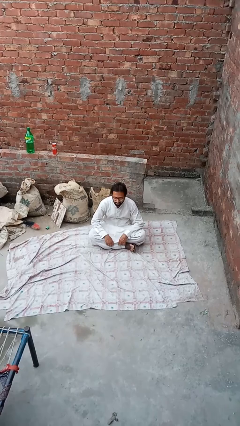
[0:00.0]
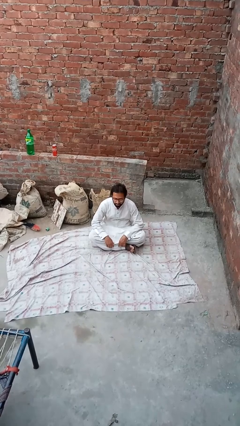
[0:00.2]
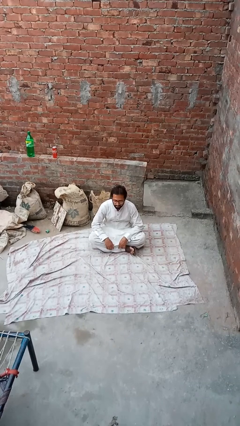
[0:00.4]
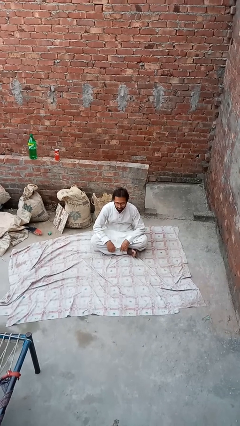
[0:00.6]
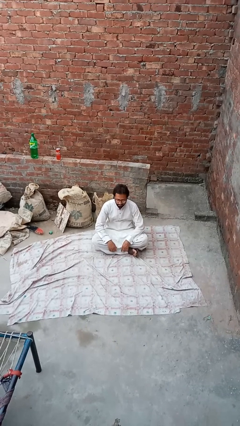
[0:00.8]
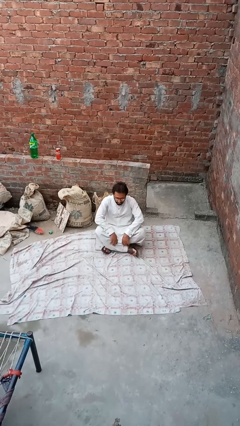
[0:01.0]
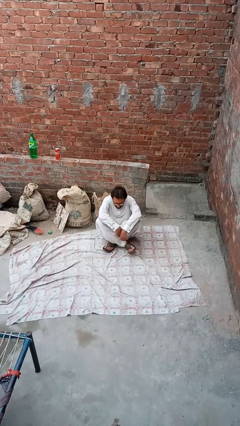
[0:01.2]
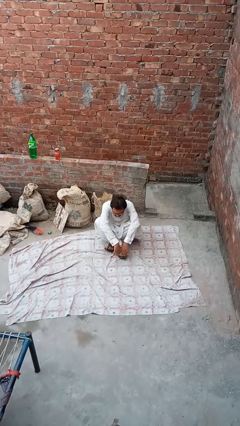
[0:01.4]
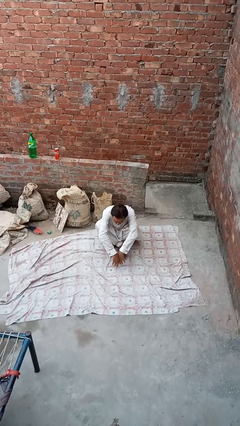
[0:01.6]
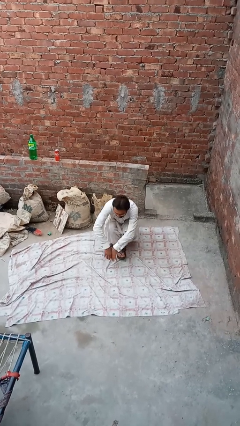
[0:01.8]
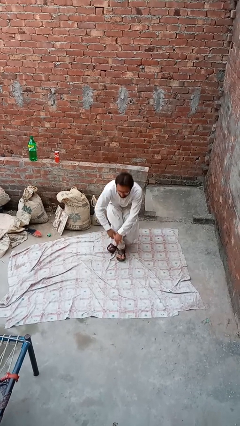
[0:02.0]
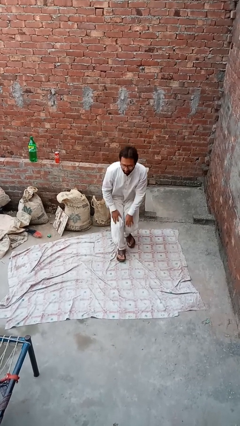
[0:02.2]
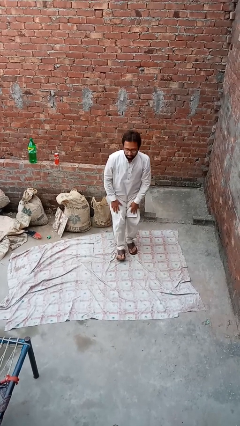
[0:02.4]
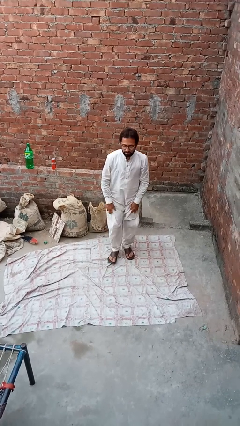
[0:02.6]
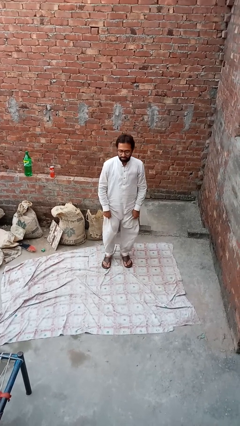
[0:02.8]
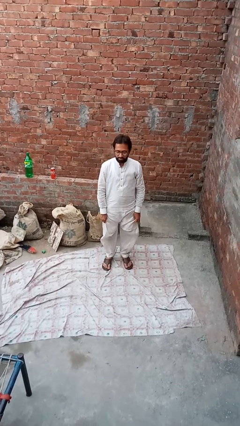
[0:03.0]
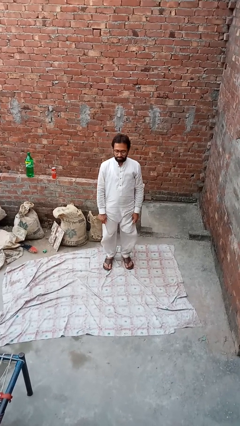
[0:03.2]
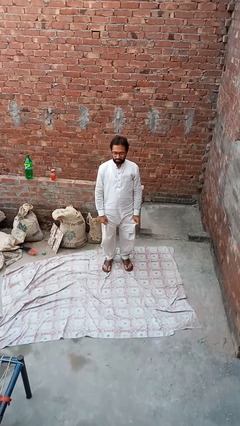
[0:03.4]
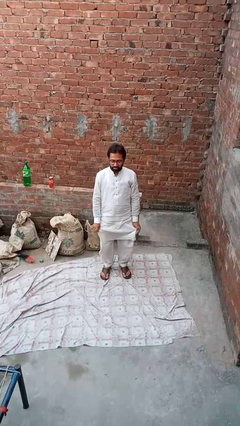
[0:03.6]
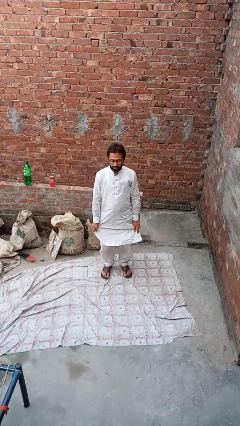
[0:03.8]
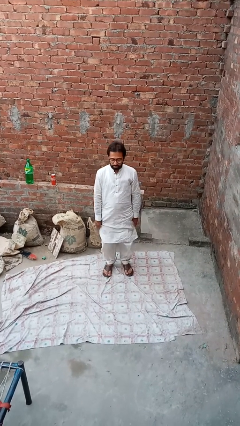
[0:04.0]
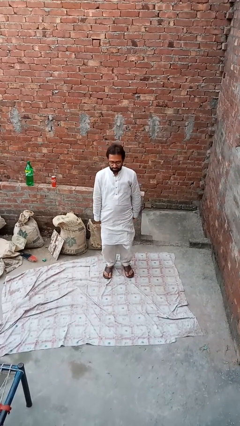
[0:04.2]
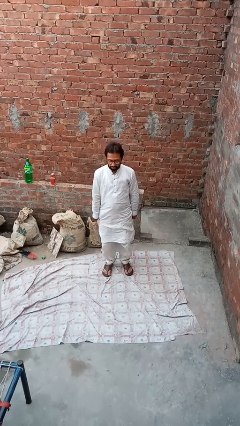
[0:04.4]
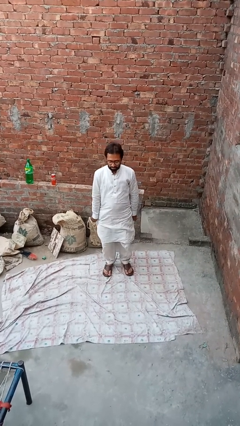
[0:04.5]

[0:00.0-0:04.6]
person stands up from floor

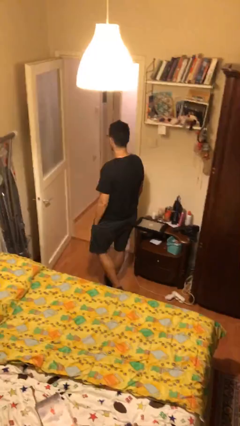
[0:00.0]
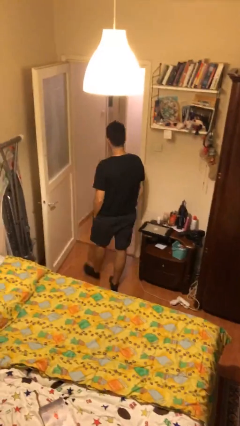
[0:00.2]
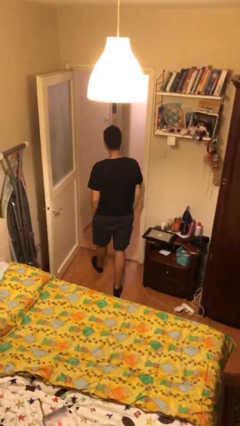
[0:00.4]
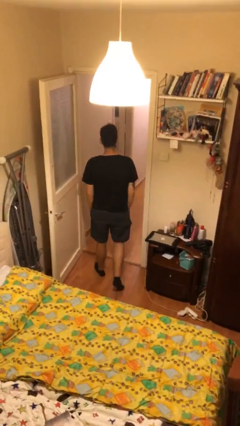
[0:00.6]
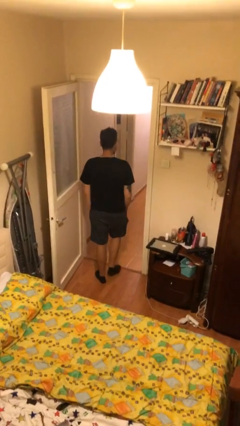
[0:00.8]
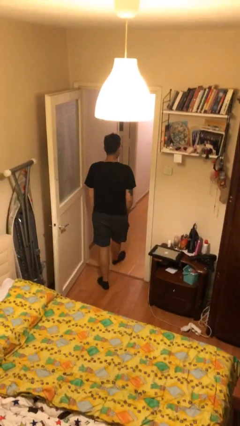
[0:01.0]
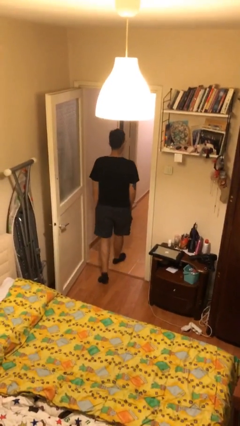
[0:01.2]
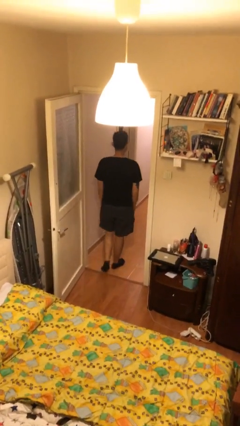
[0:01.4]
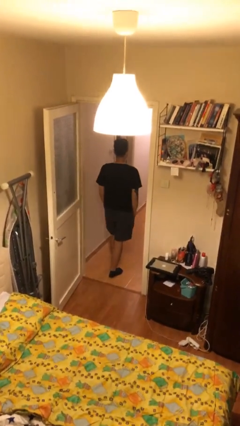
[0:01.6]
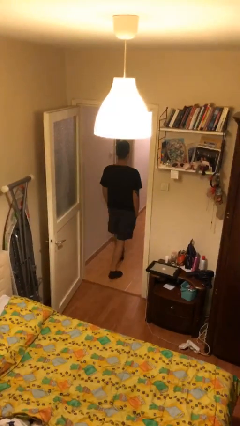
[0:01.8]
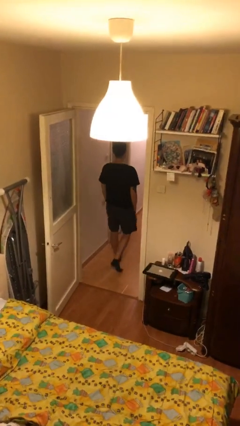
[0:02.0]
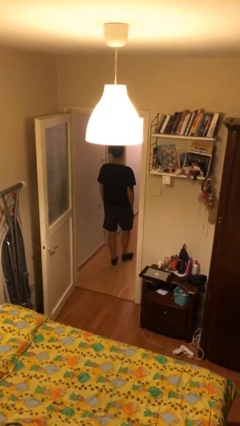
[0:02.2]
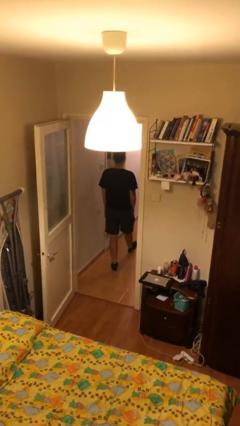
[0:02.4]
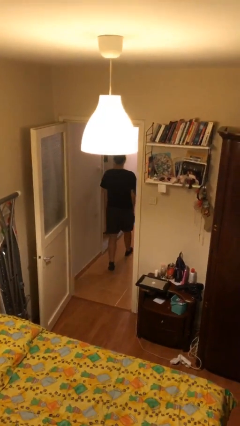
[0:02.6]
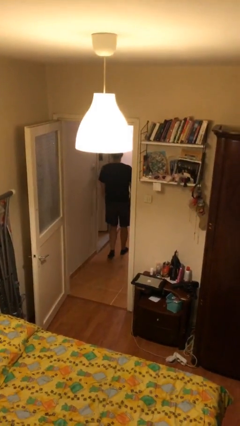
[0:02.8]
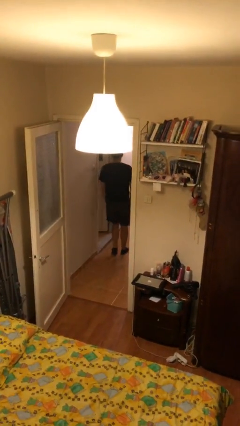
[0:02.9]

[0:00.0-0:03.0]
person exits scene through structure

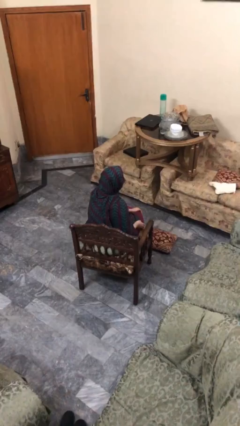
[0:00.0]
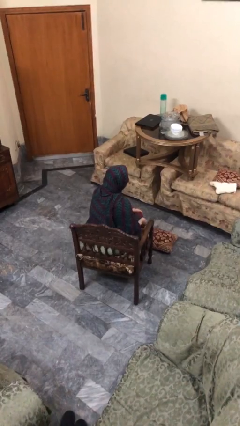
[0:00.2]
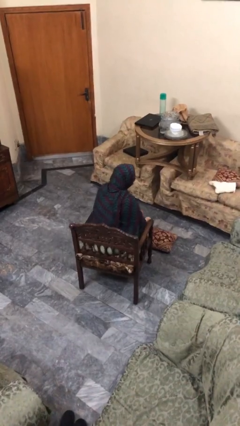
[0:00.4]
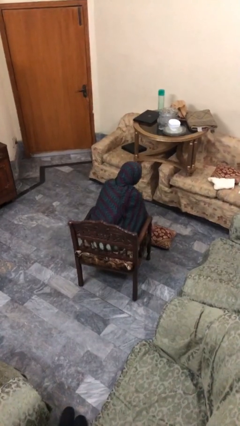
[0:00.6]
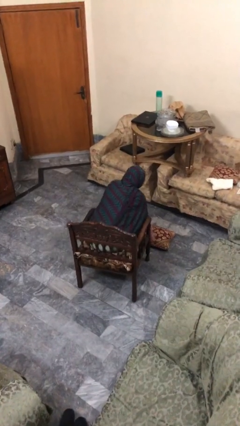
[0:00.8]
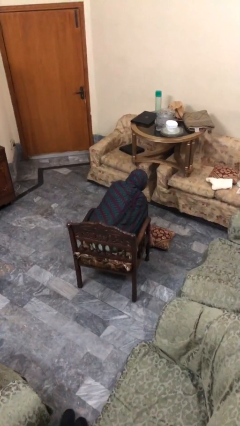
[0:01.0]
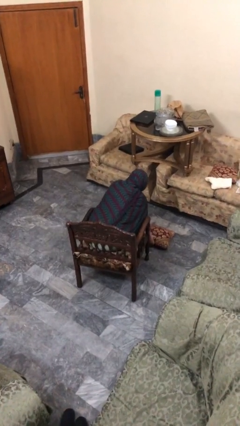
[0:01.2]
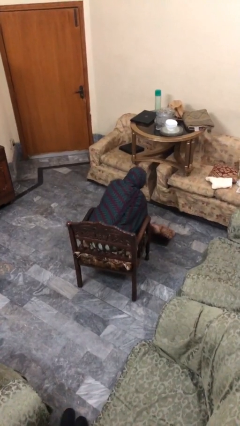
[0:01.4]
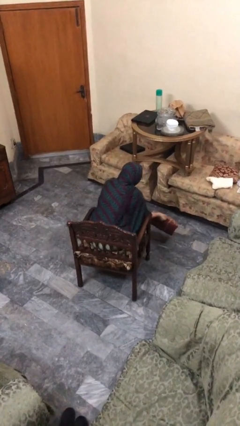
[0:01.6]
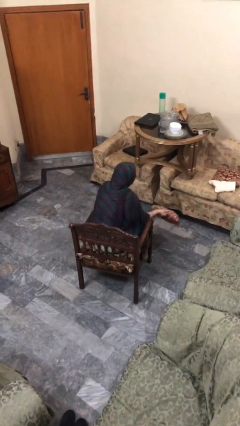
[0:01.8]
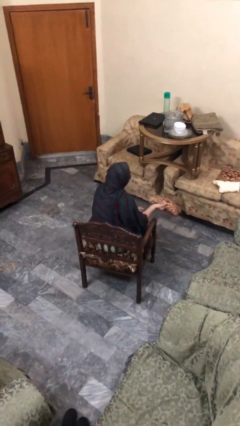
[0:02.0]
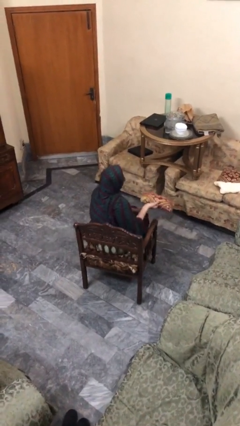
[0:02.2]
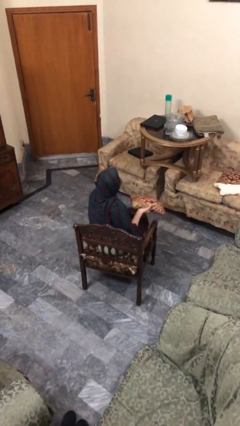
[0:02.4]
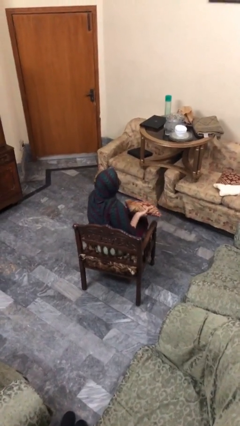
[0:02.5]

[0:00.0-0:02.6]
person picks up object from floor

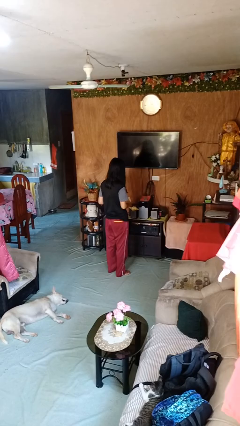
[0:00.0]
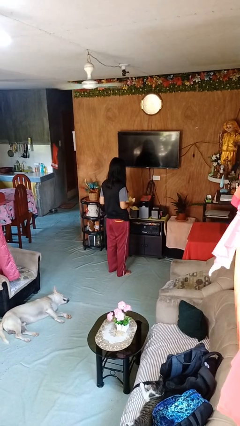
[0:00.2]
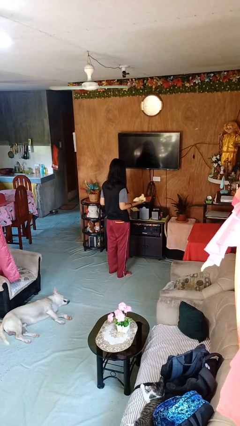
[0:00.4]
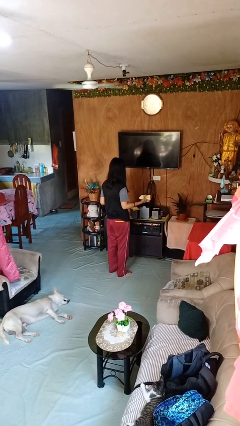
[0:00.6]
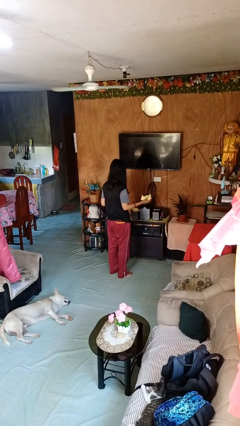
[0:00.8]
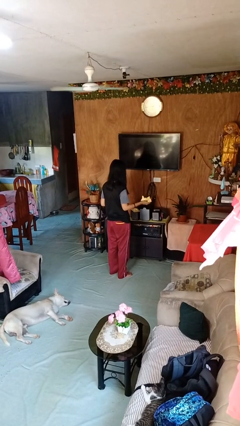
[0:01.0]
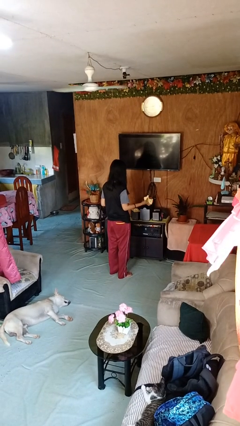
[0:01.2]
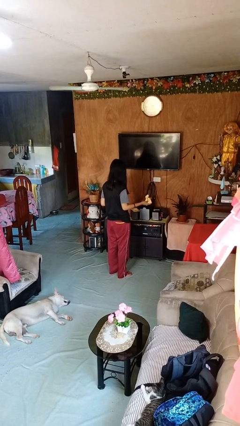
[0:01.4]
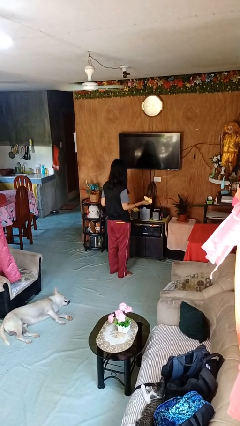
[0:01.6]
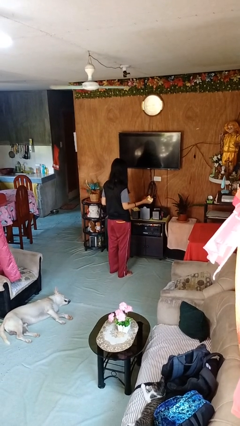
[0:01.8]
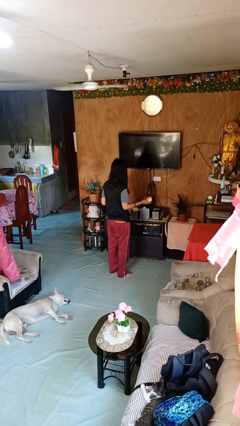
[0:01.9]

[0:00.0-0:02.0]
person crumples paper

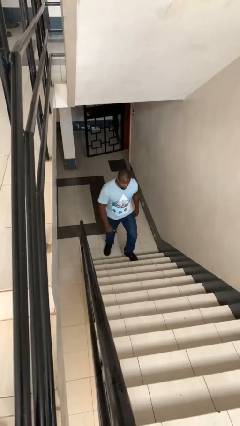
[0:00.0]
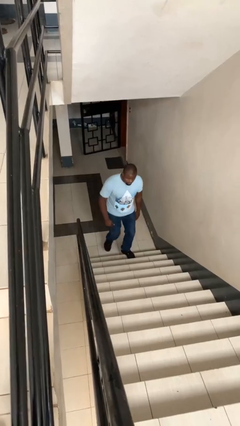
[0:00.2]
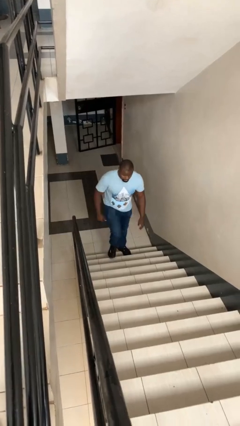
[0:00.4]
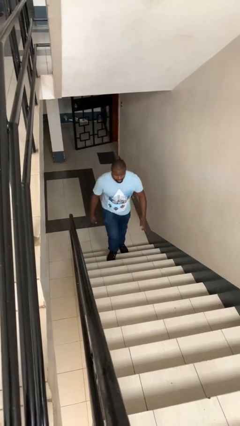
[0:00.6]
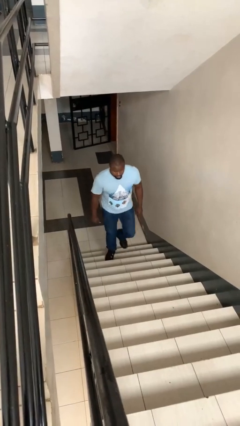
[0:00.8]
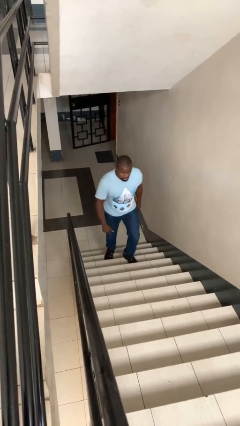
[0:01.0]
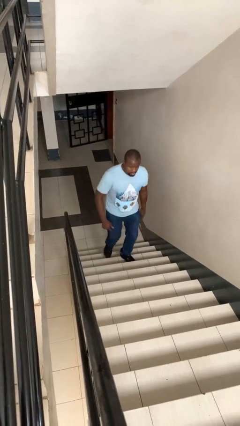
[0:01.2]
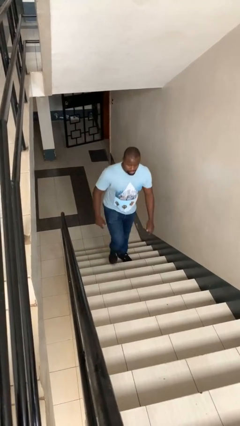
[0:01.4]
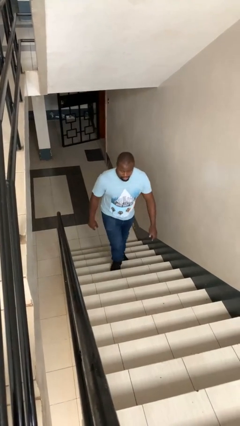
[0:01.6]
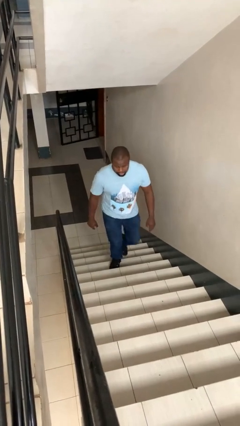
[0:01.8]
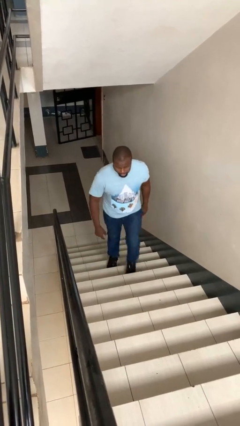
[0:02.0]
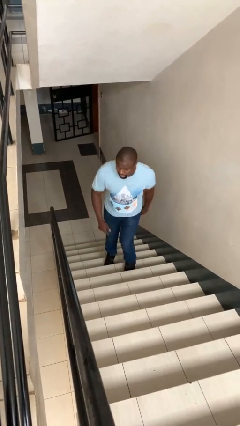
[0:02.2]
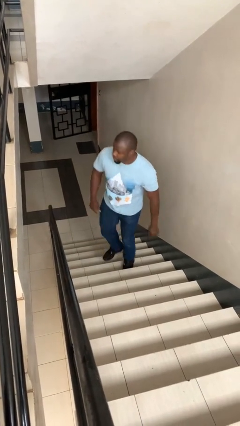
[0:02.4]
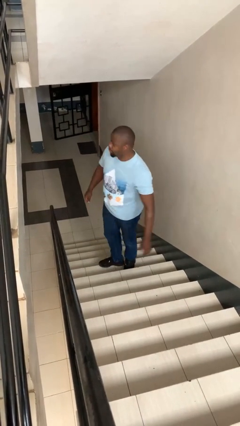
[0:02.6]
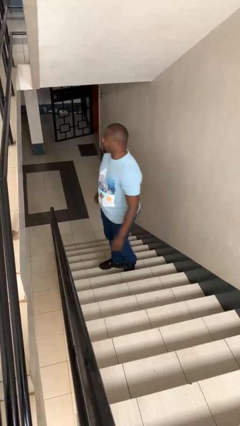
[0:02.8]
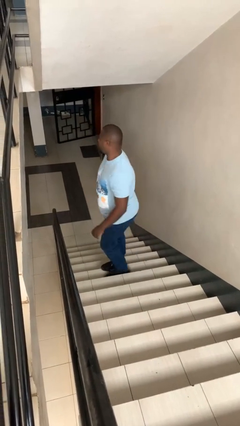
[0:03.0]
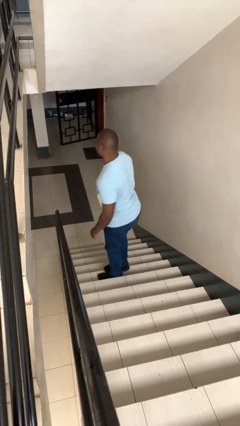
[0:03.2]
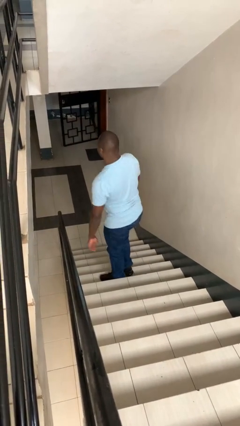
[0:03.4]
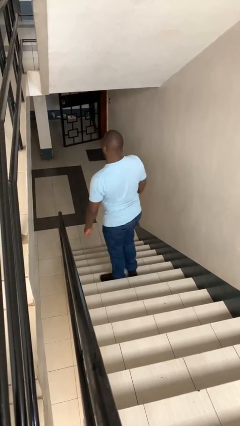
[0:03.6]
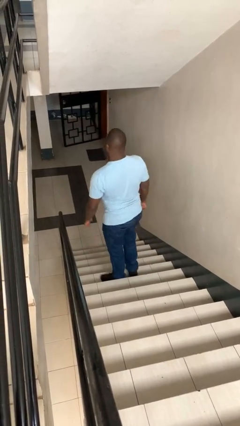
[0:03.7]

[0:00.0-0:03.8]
person climbs up stairs

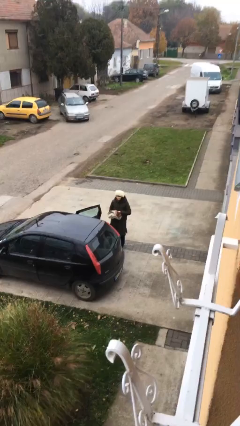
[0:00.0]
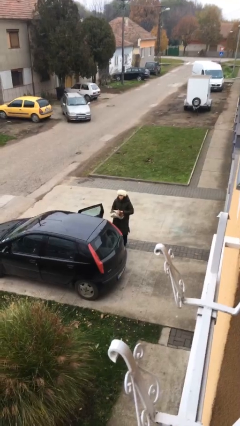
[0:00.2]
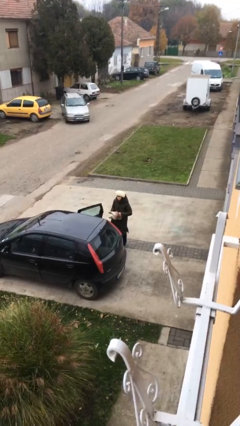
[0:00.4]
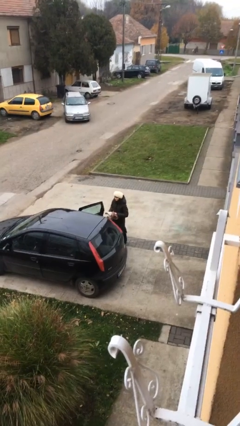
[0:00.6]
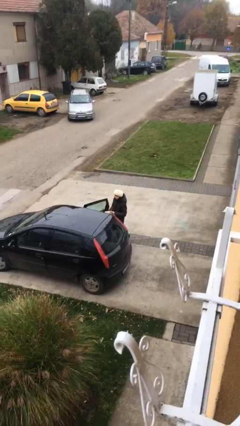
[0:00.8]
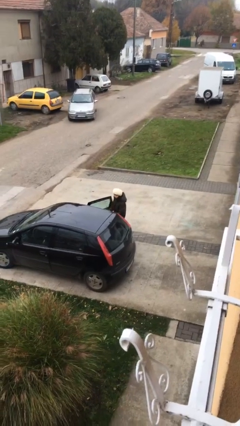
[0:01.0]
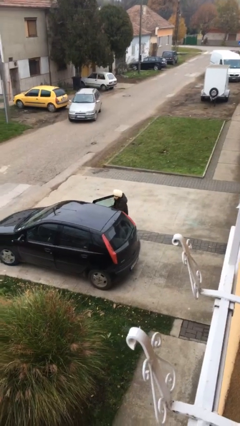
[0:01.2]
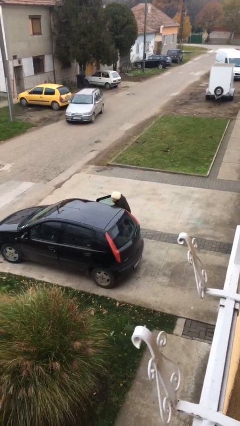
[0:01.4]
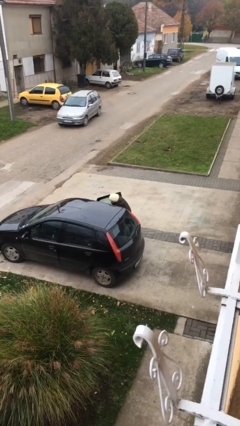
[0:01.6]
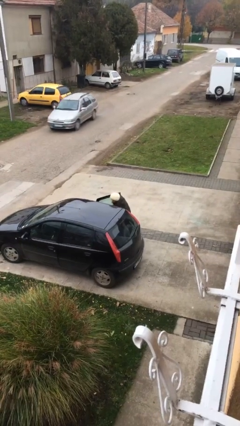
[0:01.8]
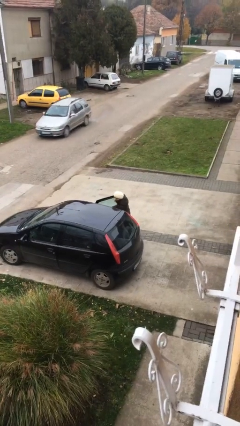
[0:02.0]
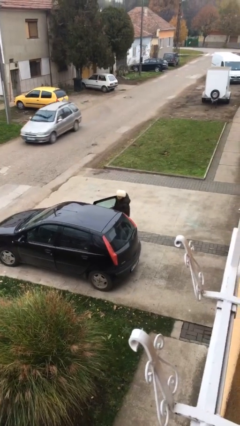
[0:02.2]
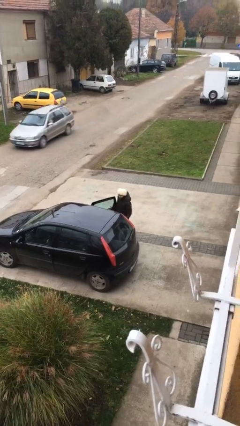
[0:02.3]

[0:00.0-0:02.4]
person loads car
